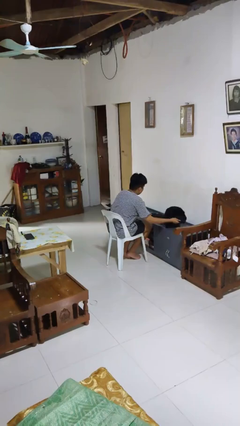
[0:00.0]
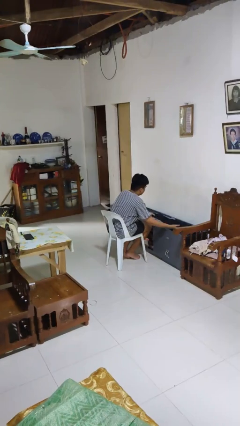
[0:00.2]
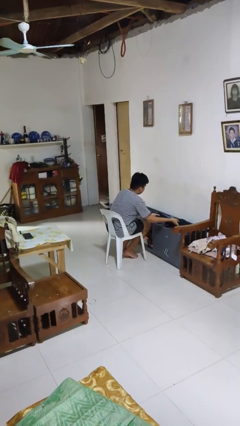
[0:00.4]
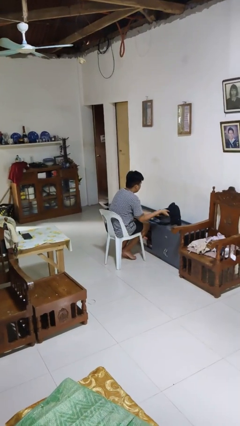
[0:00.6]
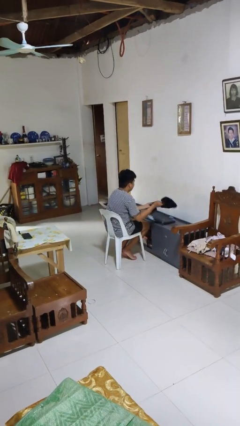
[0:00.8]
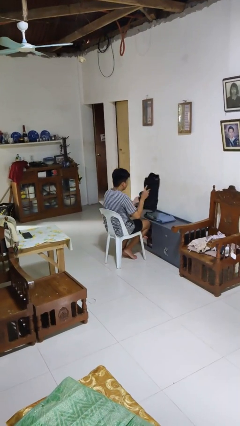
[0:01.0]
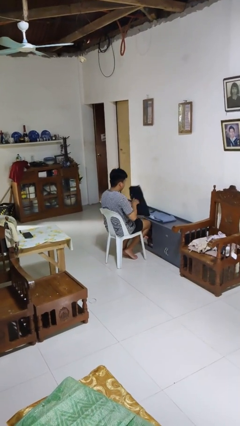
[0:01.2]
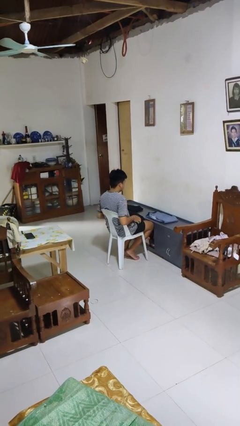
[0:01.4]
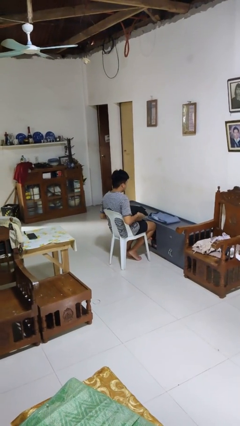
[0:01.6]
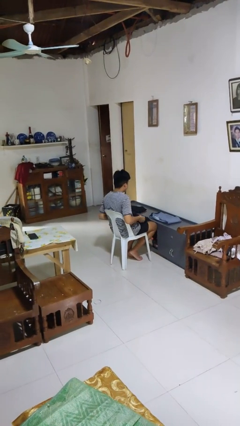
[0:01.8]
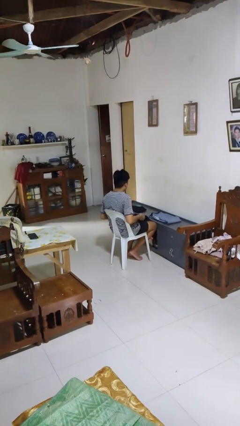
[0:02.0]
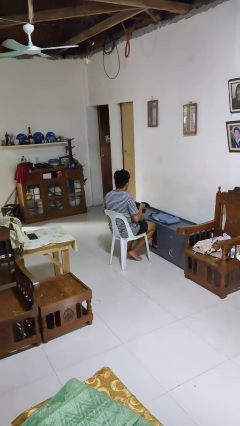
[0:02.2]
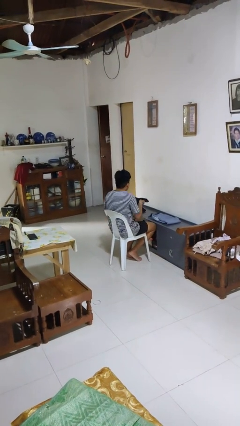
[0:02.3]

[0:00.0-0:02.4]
person folds pants

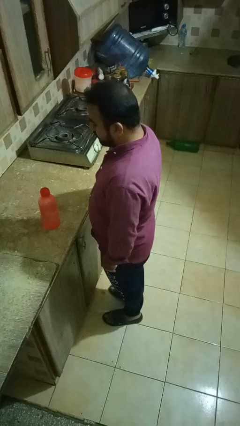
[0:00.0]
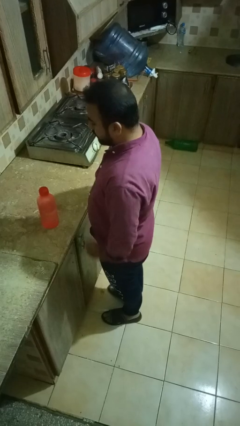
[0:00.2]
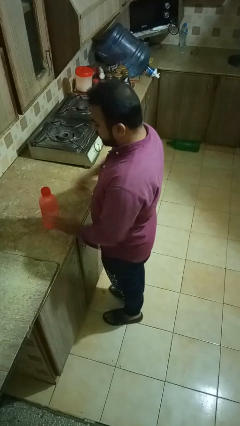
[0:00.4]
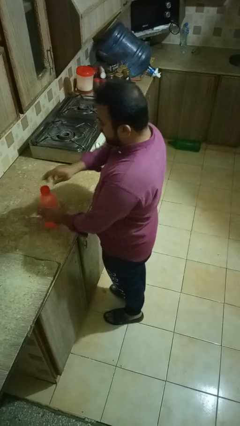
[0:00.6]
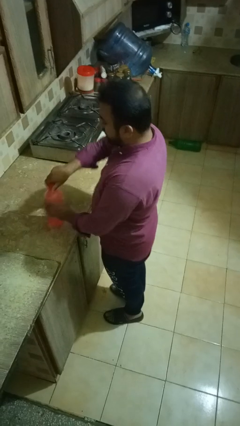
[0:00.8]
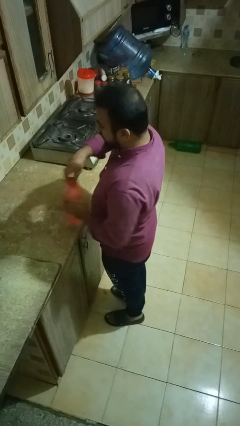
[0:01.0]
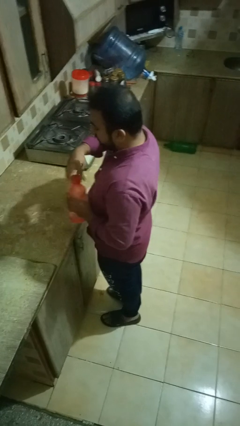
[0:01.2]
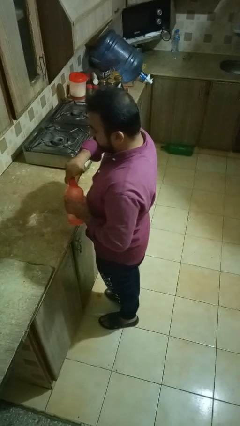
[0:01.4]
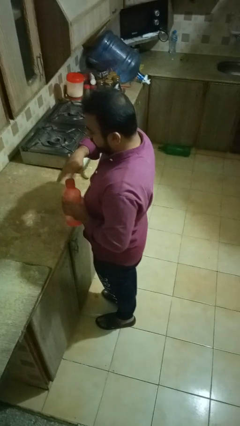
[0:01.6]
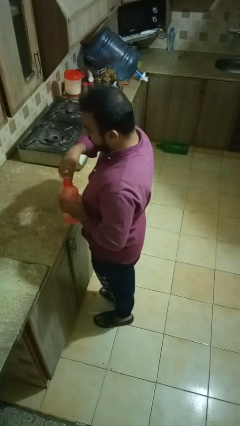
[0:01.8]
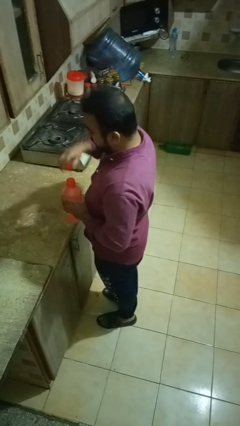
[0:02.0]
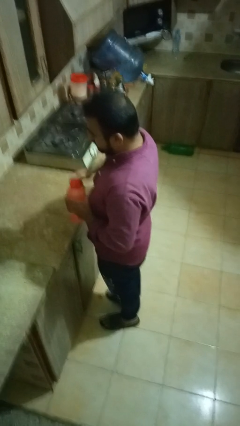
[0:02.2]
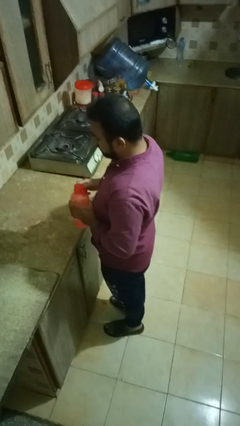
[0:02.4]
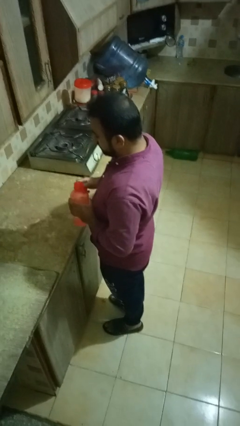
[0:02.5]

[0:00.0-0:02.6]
person unscrews lid from bottle

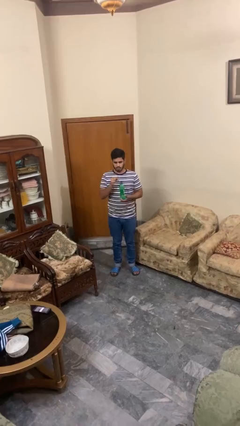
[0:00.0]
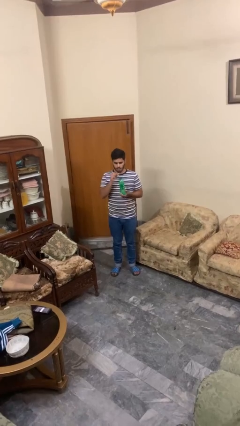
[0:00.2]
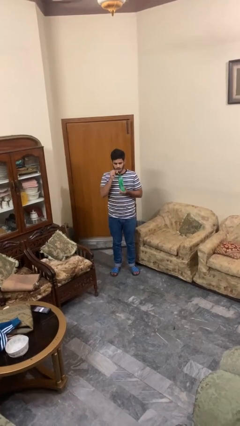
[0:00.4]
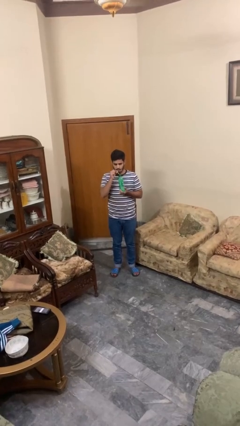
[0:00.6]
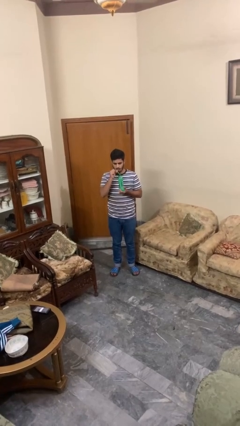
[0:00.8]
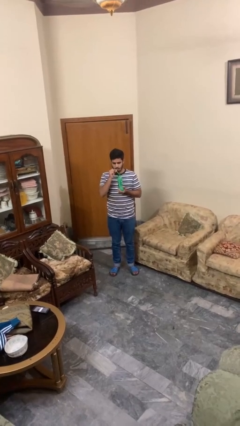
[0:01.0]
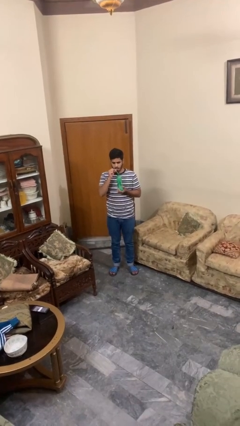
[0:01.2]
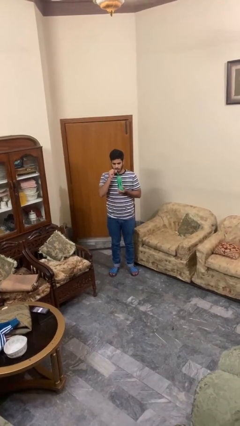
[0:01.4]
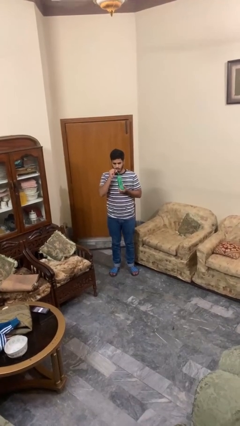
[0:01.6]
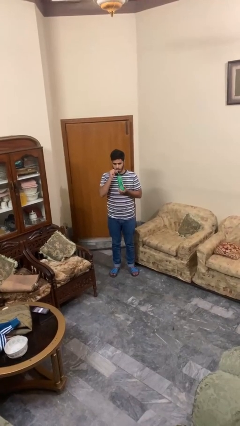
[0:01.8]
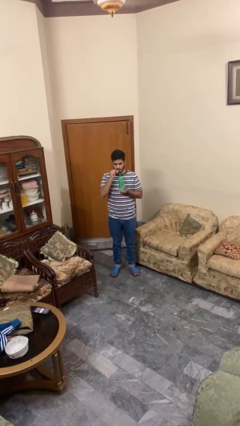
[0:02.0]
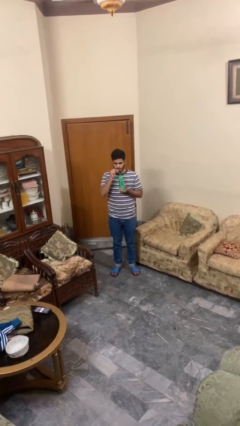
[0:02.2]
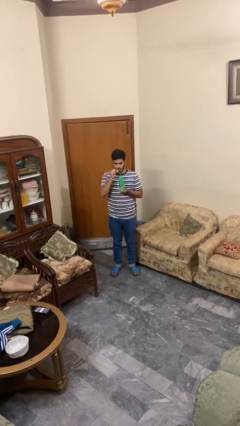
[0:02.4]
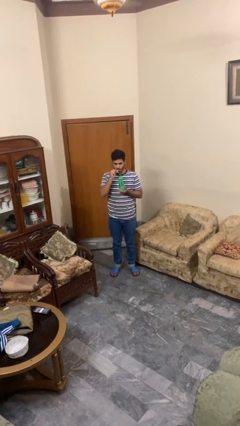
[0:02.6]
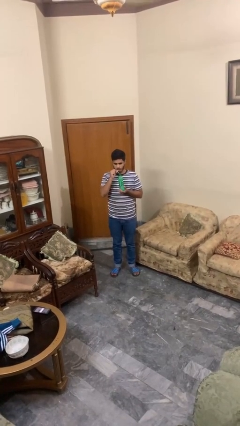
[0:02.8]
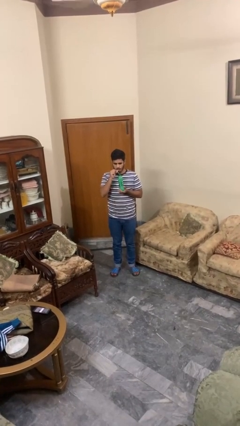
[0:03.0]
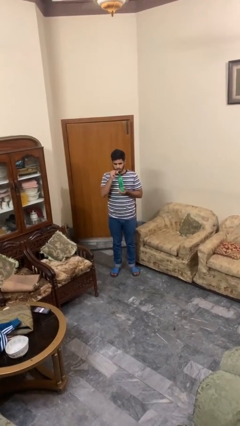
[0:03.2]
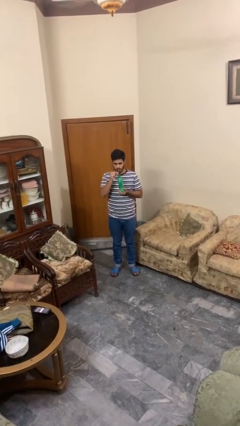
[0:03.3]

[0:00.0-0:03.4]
person drinks from straw

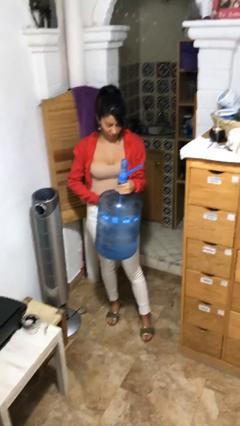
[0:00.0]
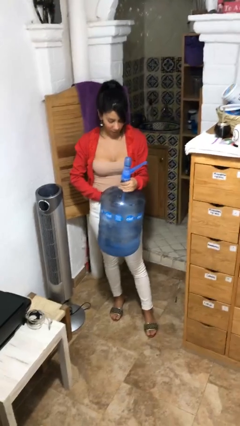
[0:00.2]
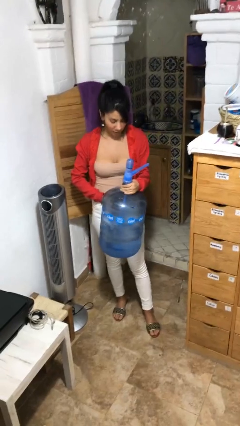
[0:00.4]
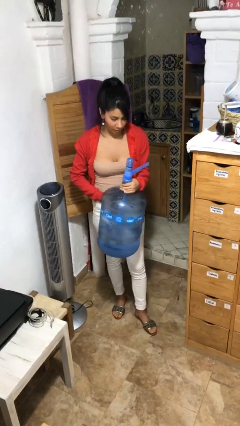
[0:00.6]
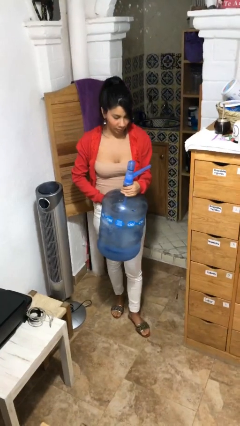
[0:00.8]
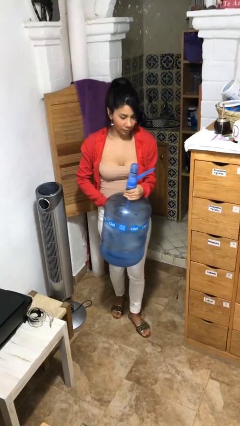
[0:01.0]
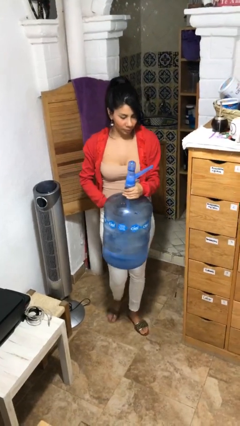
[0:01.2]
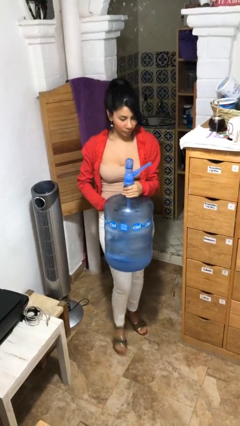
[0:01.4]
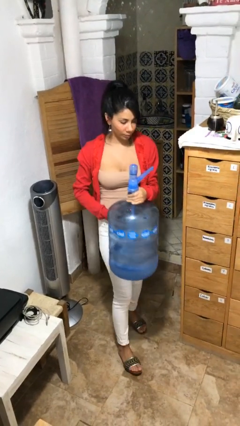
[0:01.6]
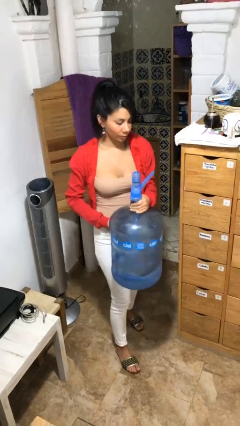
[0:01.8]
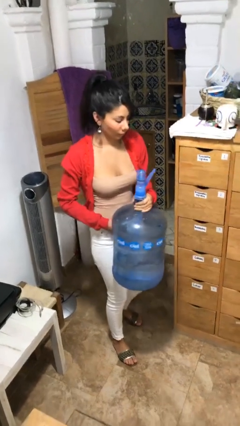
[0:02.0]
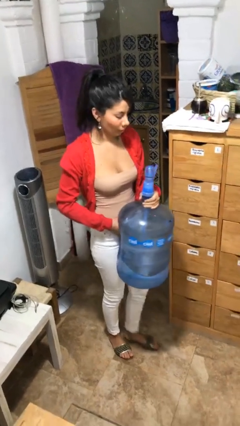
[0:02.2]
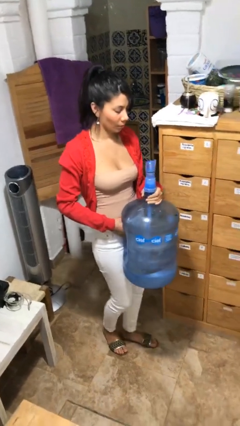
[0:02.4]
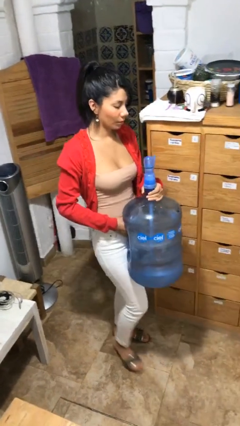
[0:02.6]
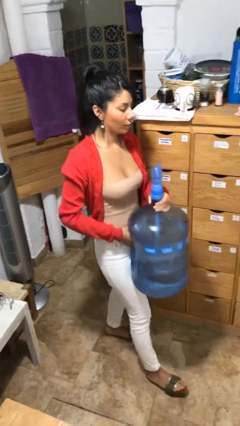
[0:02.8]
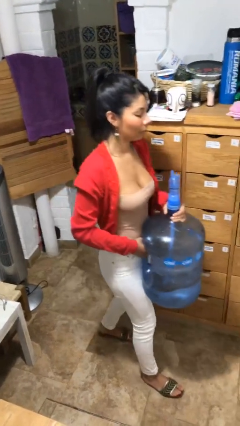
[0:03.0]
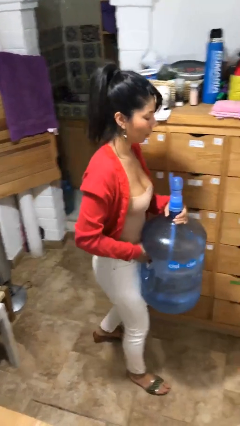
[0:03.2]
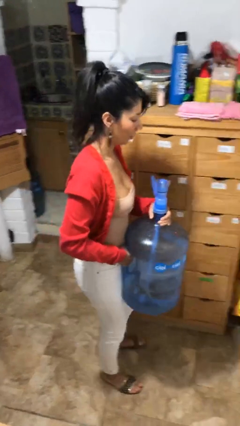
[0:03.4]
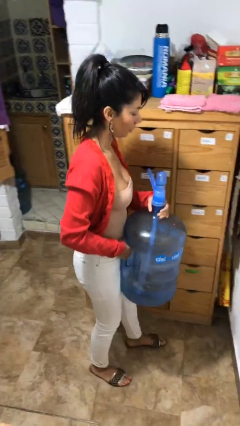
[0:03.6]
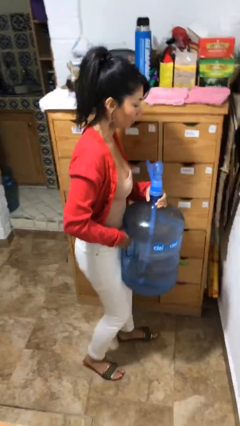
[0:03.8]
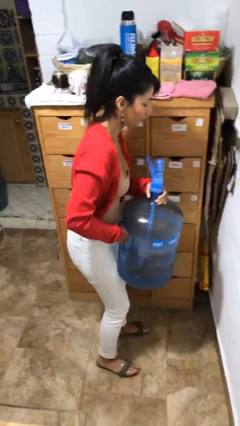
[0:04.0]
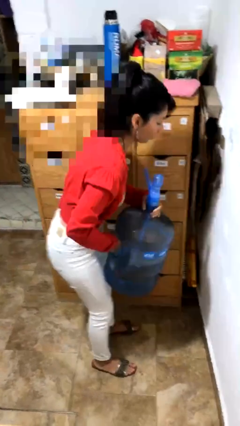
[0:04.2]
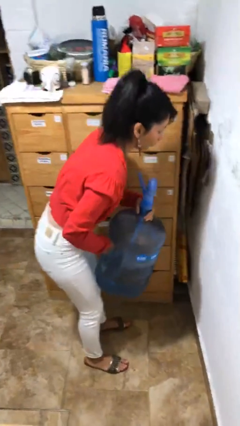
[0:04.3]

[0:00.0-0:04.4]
person carries heavy object

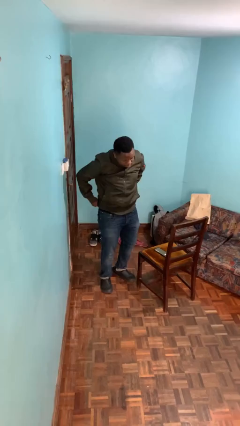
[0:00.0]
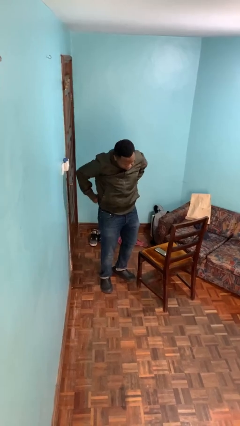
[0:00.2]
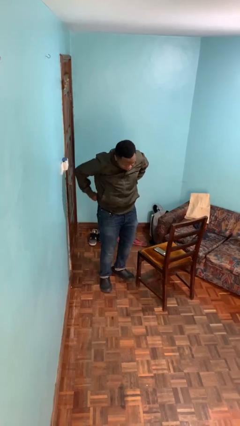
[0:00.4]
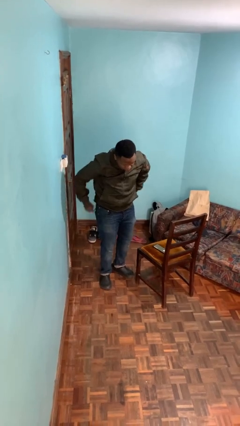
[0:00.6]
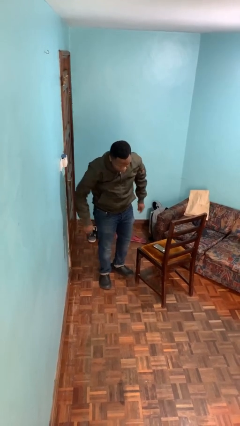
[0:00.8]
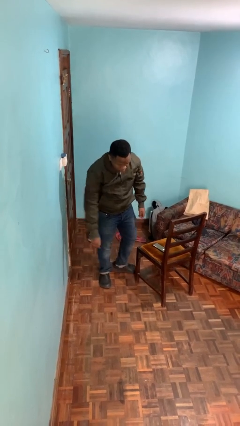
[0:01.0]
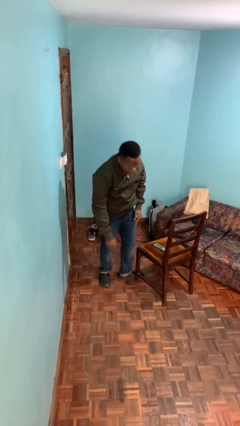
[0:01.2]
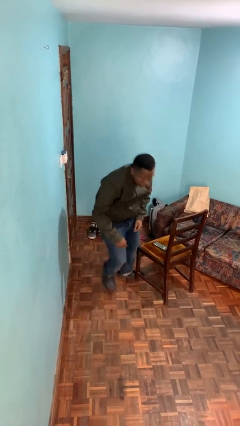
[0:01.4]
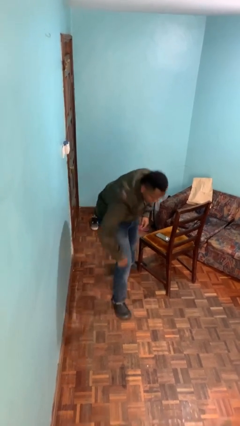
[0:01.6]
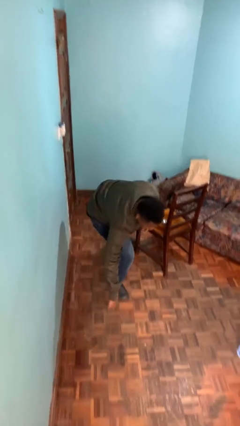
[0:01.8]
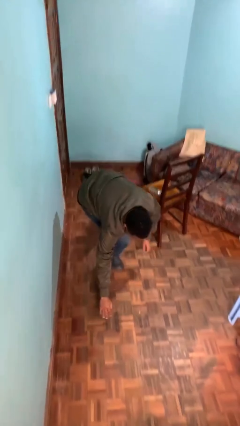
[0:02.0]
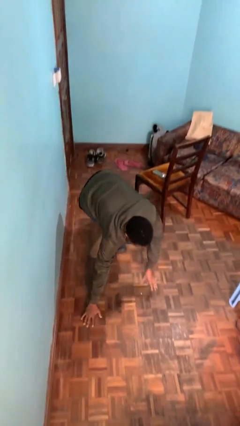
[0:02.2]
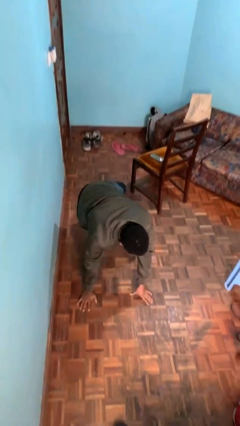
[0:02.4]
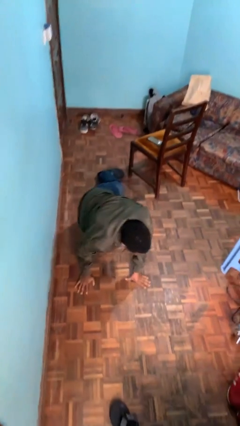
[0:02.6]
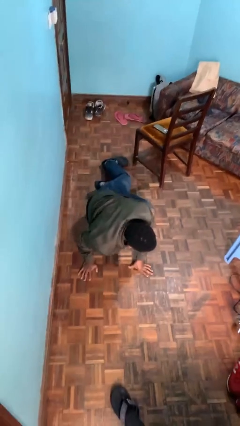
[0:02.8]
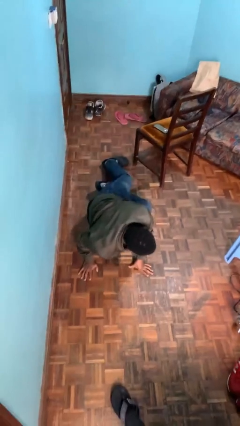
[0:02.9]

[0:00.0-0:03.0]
person trips on object on floor

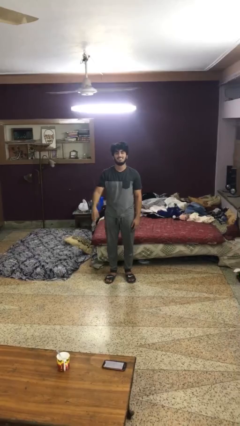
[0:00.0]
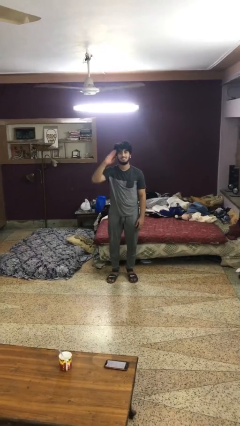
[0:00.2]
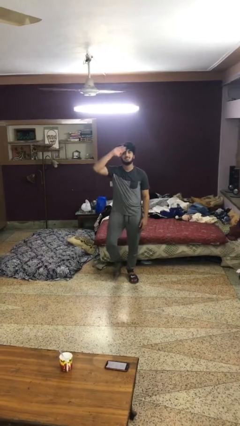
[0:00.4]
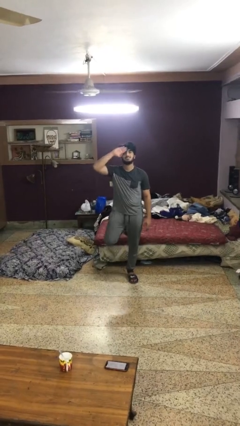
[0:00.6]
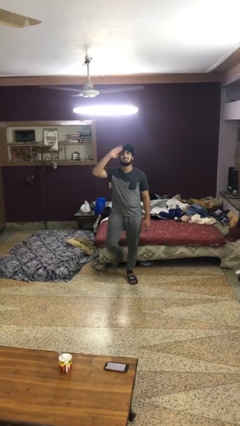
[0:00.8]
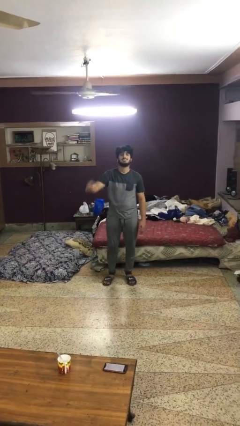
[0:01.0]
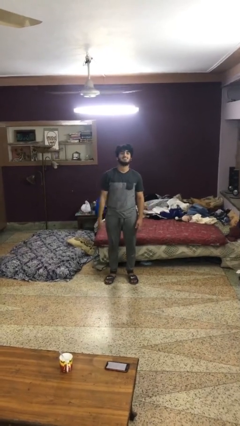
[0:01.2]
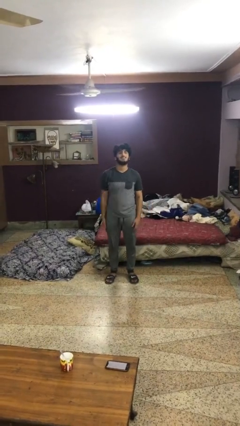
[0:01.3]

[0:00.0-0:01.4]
person salutes
